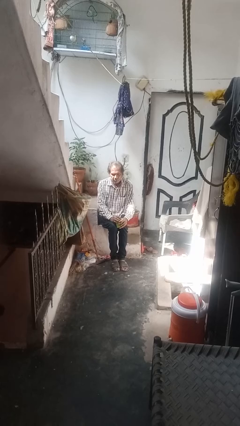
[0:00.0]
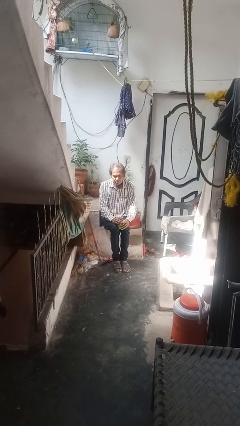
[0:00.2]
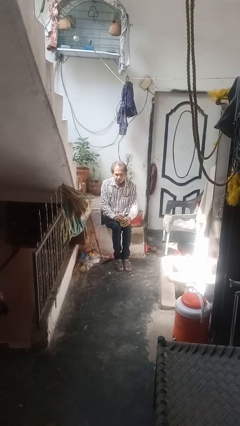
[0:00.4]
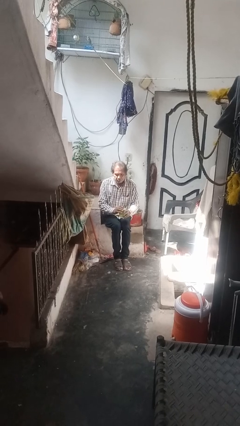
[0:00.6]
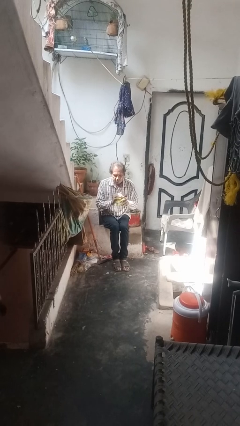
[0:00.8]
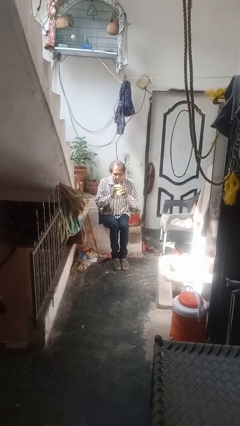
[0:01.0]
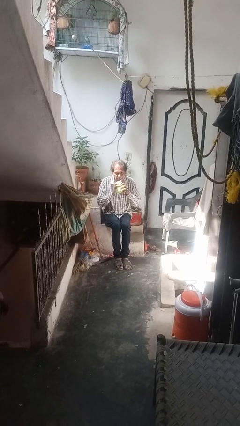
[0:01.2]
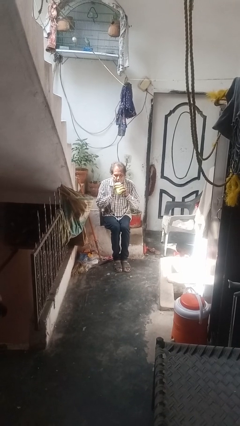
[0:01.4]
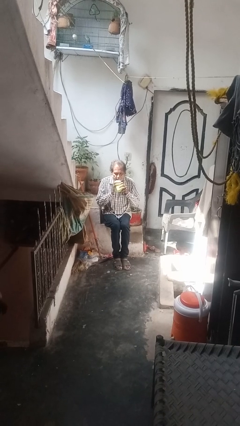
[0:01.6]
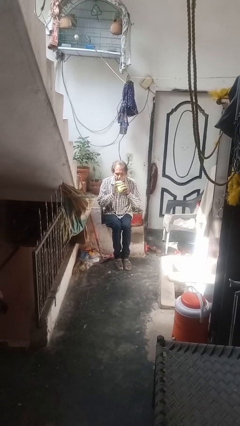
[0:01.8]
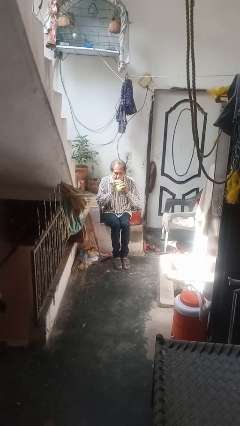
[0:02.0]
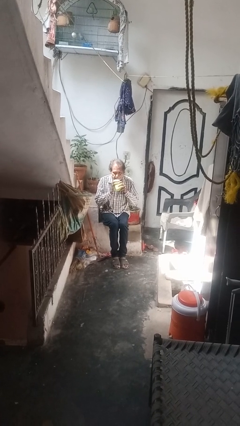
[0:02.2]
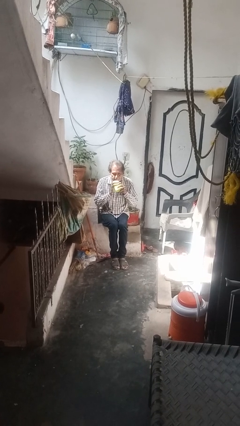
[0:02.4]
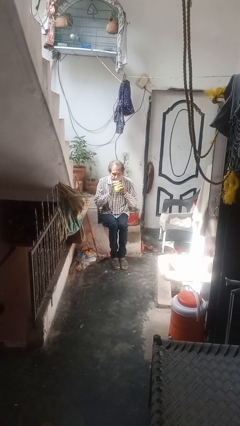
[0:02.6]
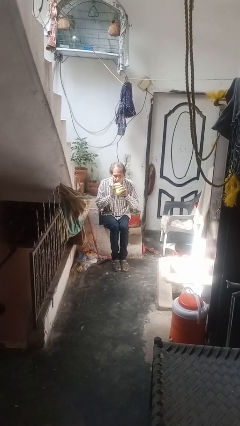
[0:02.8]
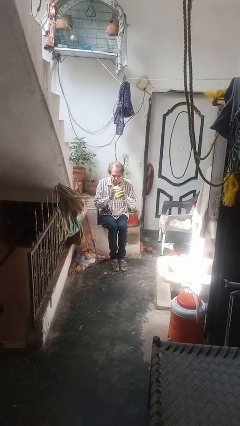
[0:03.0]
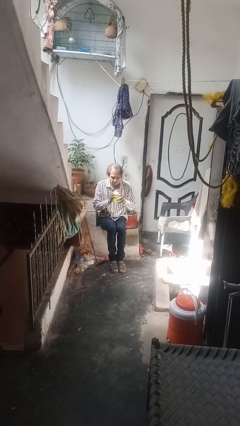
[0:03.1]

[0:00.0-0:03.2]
person drinks from straw

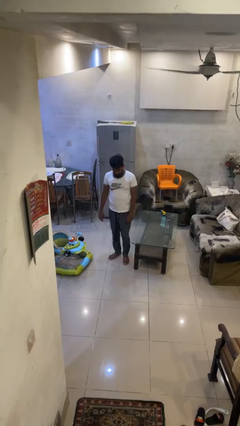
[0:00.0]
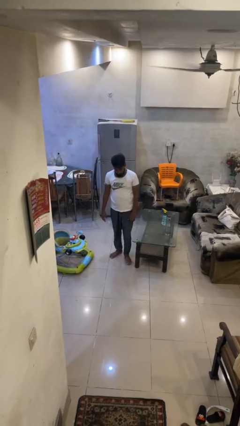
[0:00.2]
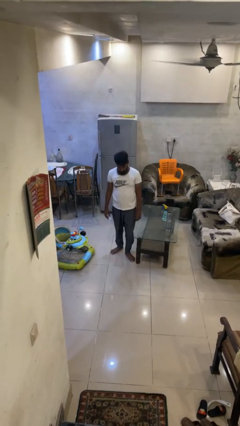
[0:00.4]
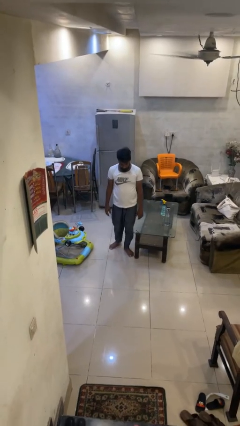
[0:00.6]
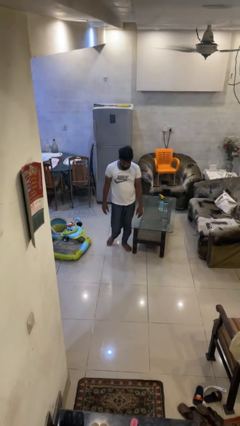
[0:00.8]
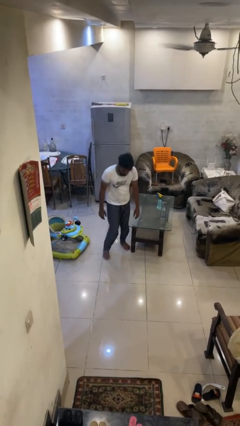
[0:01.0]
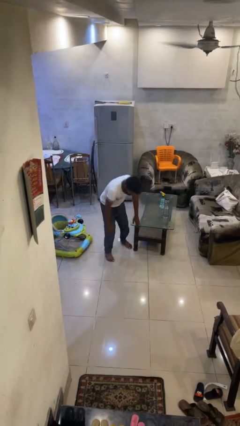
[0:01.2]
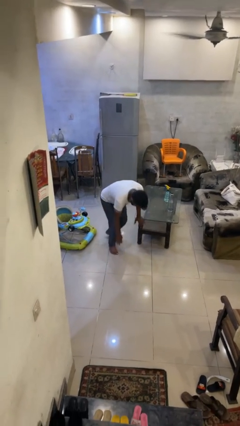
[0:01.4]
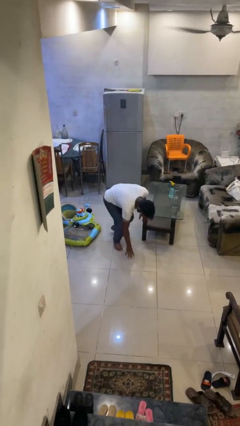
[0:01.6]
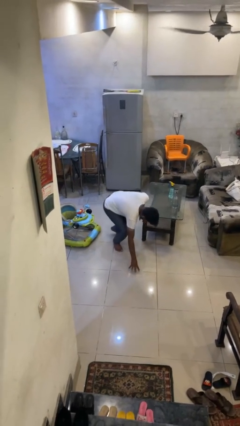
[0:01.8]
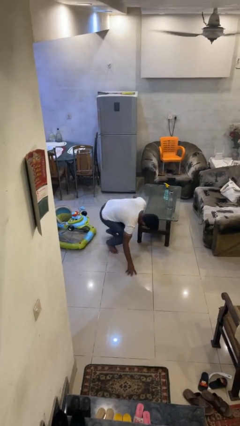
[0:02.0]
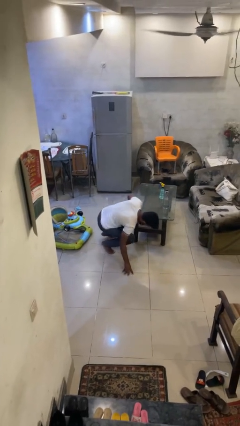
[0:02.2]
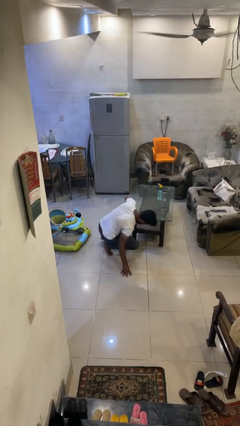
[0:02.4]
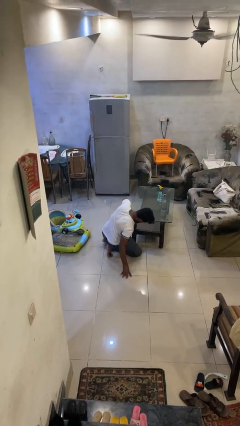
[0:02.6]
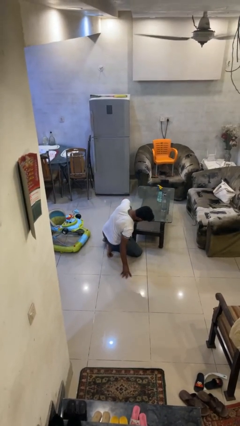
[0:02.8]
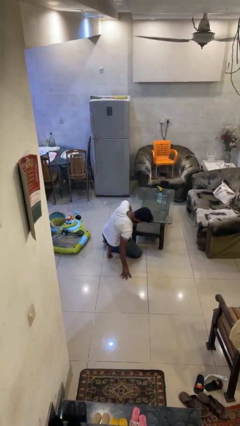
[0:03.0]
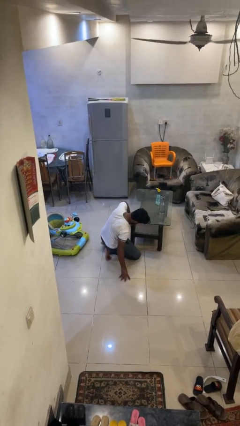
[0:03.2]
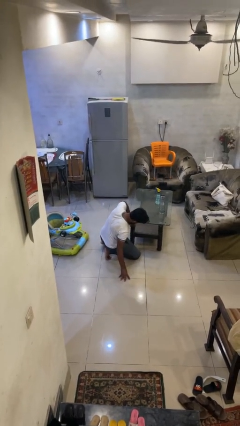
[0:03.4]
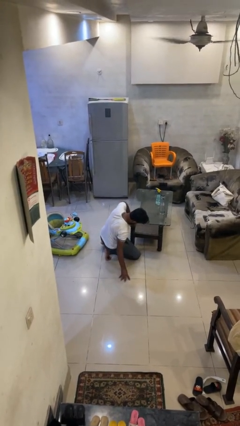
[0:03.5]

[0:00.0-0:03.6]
person trips on object on floor

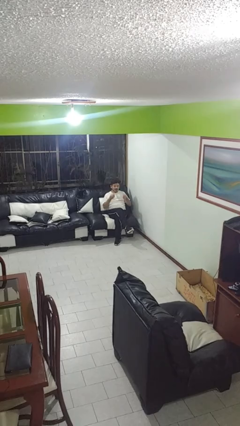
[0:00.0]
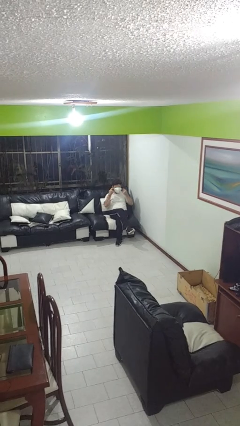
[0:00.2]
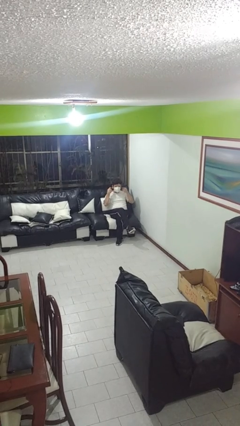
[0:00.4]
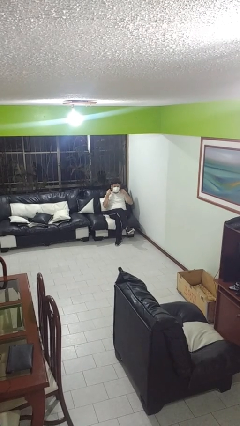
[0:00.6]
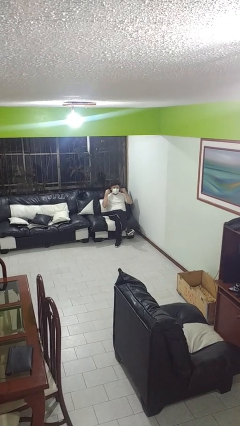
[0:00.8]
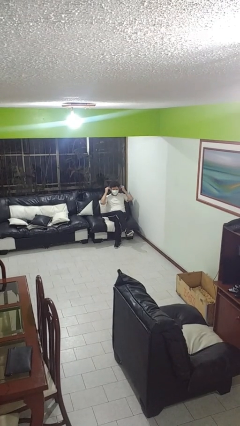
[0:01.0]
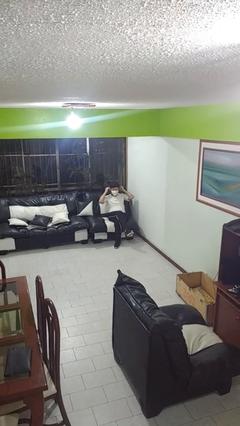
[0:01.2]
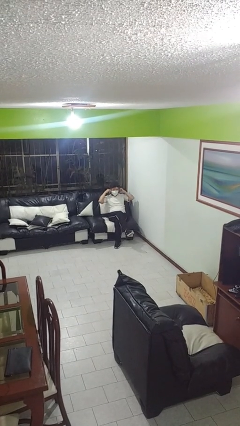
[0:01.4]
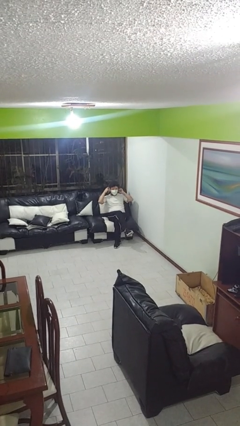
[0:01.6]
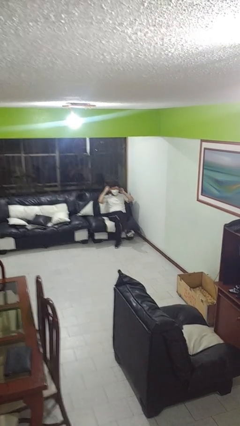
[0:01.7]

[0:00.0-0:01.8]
person puts on facemask

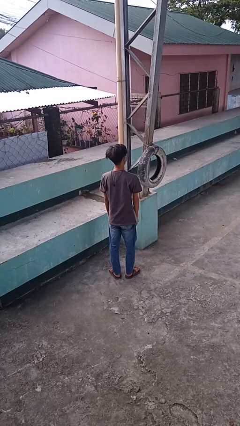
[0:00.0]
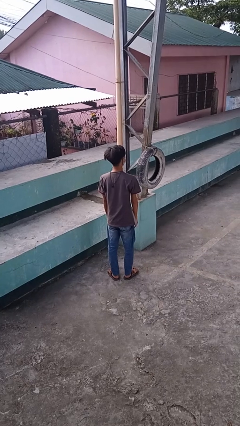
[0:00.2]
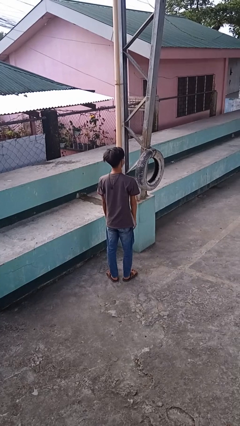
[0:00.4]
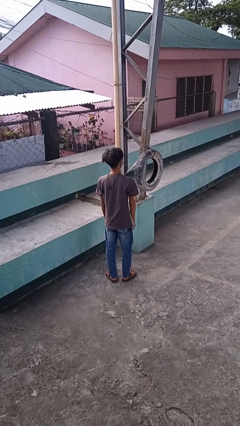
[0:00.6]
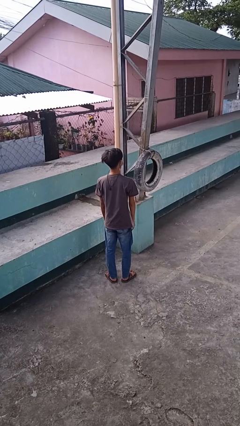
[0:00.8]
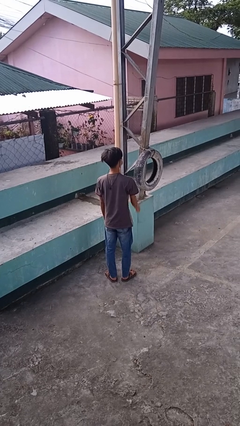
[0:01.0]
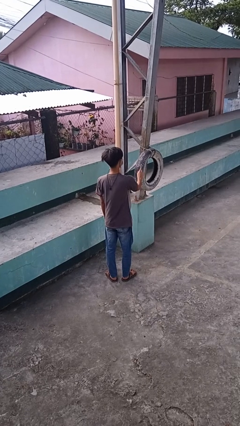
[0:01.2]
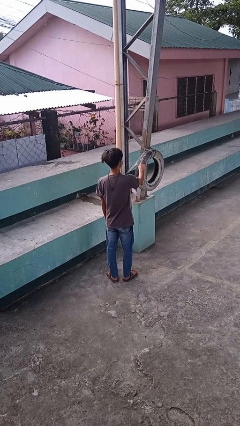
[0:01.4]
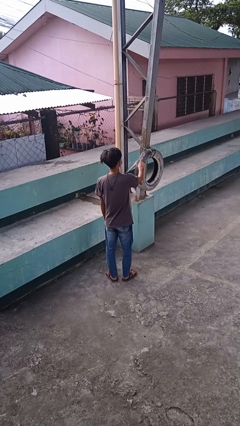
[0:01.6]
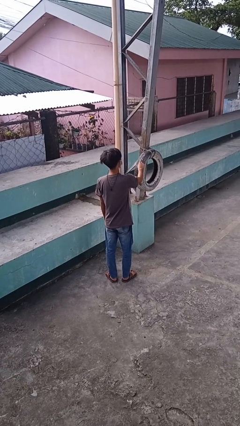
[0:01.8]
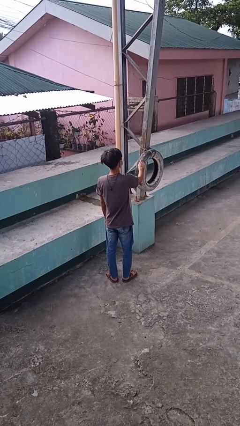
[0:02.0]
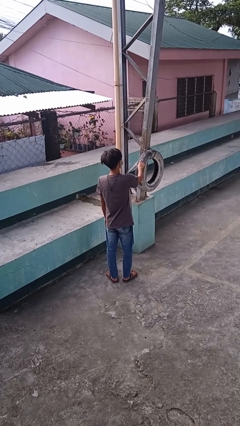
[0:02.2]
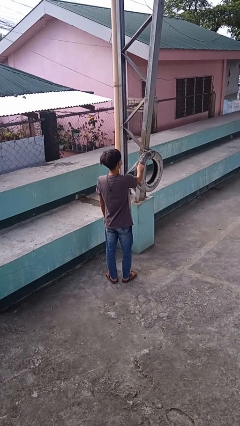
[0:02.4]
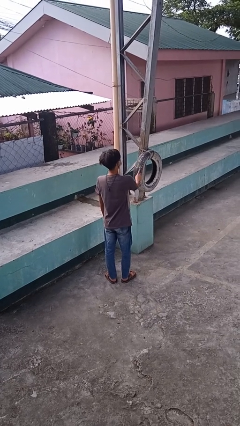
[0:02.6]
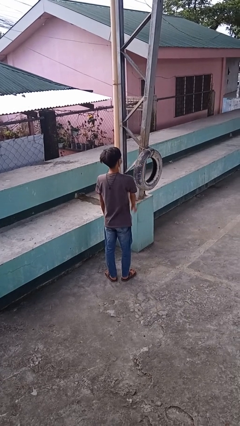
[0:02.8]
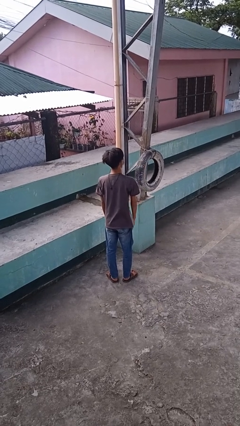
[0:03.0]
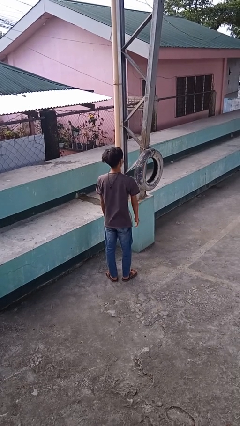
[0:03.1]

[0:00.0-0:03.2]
person taps object with finger

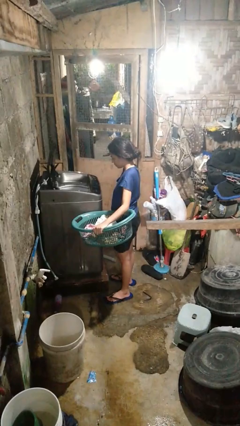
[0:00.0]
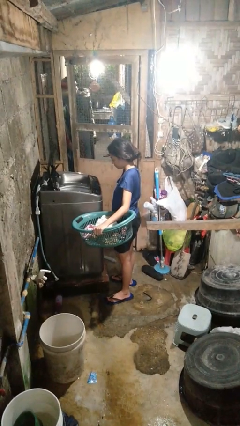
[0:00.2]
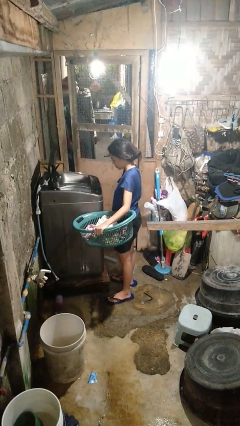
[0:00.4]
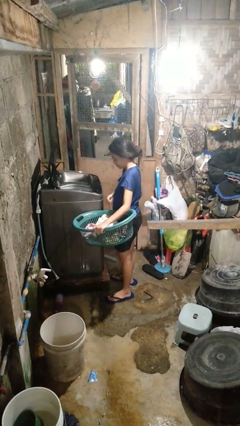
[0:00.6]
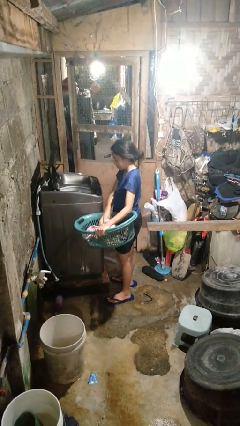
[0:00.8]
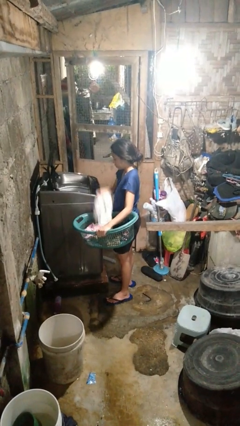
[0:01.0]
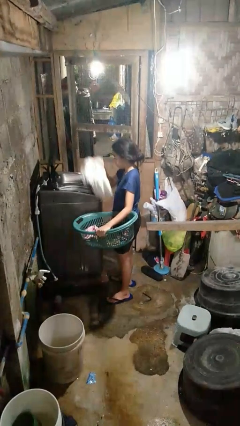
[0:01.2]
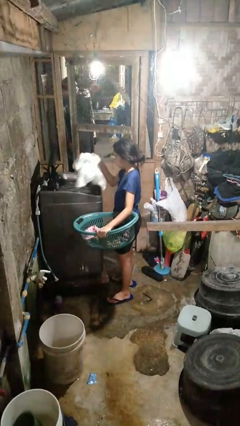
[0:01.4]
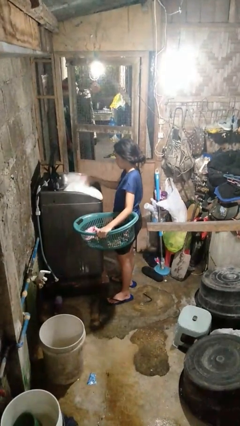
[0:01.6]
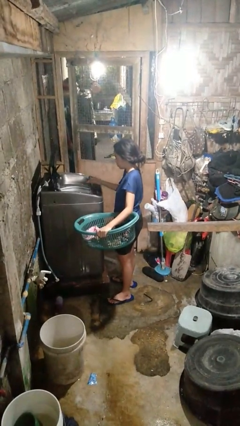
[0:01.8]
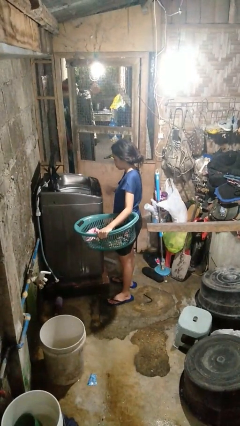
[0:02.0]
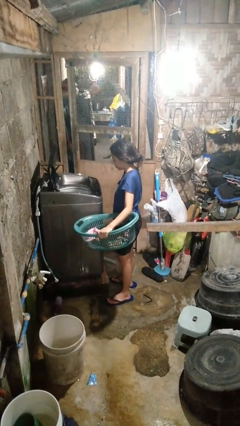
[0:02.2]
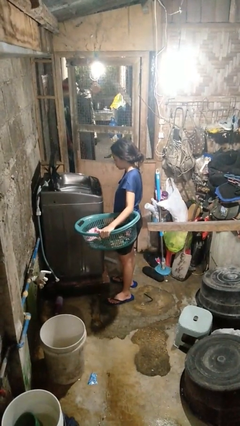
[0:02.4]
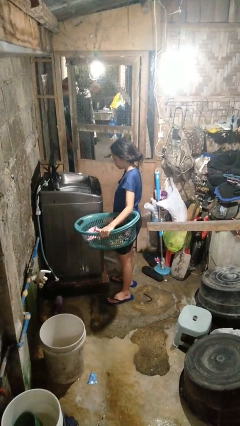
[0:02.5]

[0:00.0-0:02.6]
person loads clotheswasher

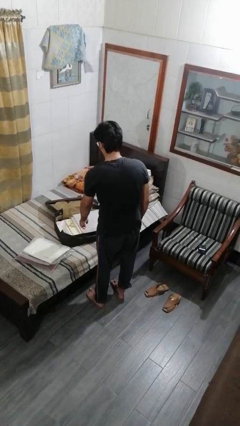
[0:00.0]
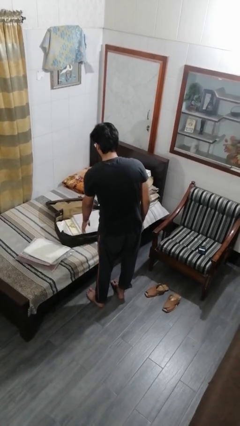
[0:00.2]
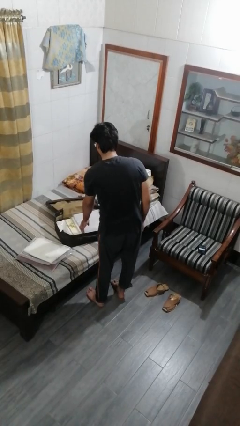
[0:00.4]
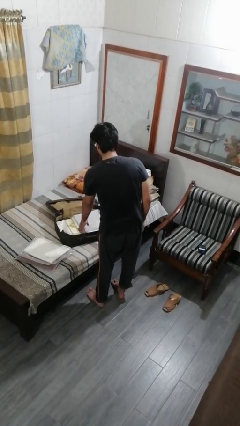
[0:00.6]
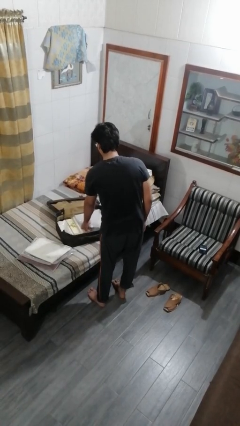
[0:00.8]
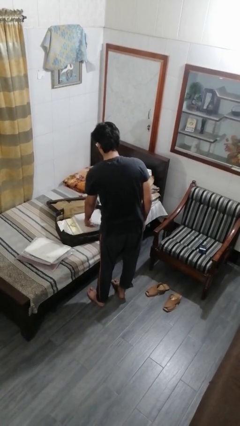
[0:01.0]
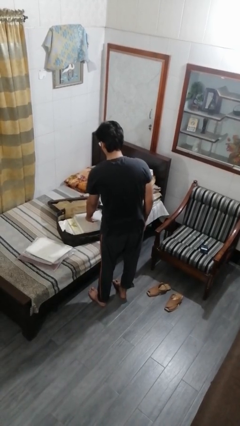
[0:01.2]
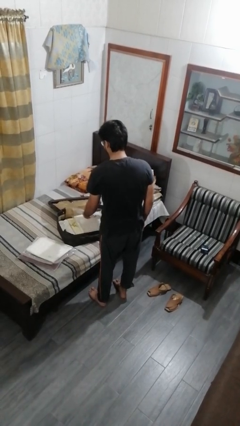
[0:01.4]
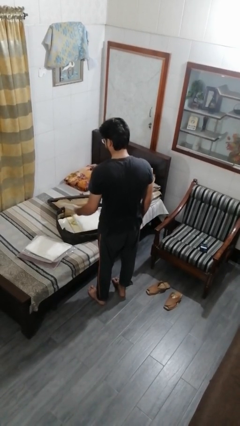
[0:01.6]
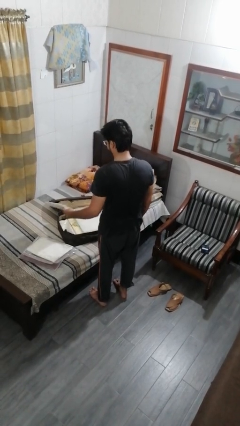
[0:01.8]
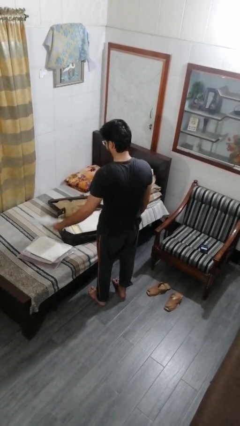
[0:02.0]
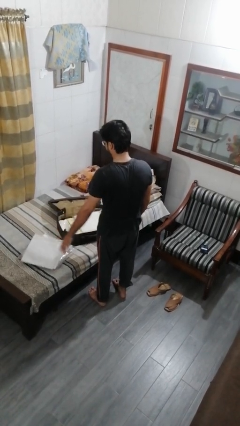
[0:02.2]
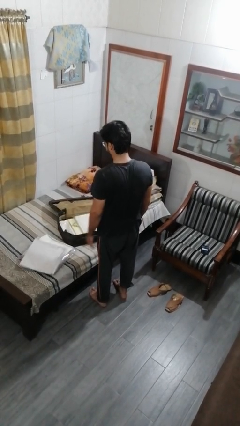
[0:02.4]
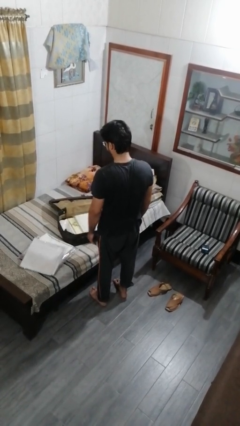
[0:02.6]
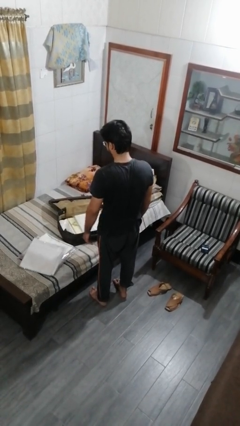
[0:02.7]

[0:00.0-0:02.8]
person unloads clothes from suitcase

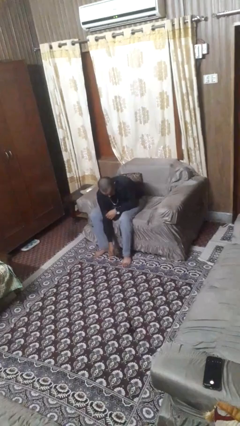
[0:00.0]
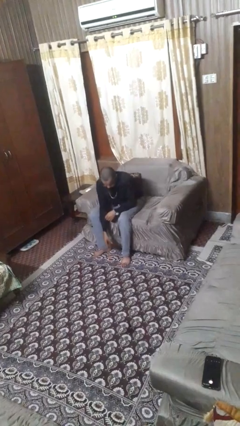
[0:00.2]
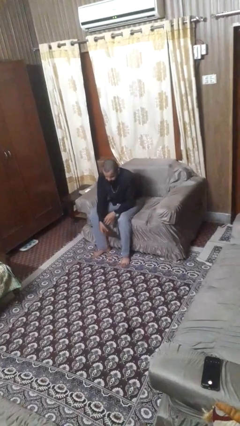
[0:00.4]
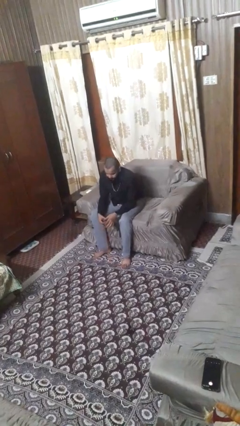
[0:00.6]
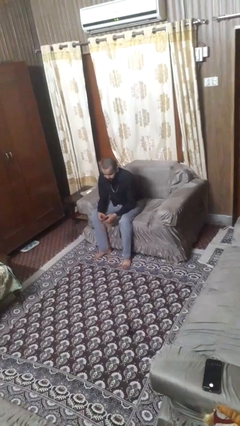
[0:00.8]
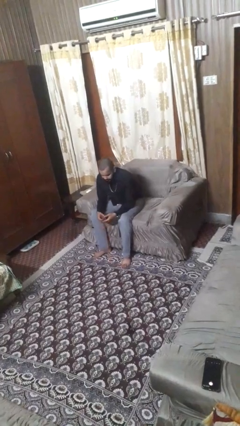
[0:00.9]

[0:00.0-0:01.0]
person picks up object from floor
